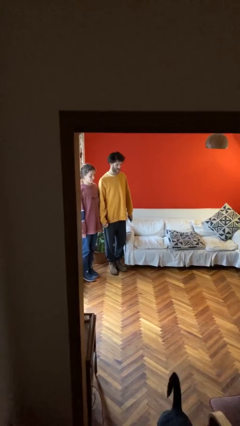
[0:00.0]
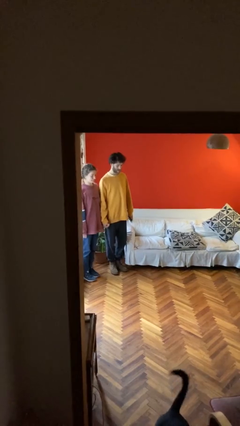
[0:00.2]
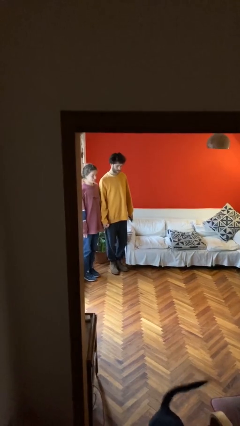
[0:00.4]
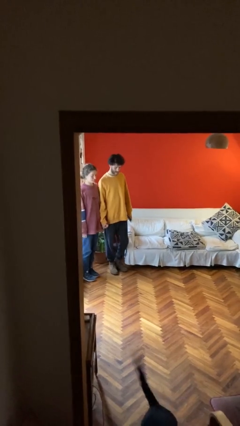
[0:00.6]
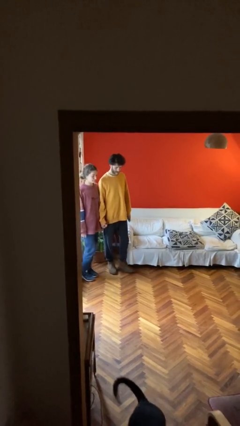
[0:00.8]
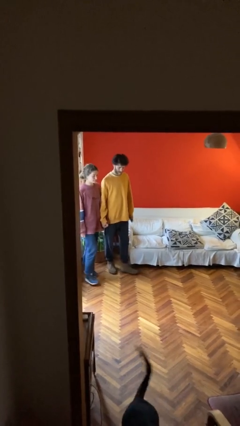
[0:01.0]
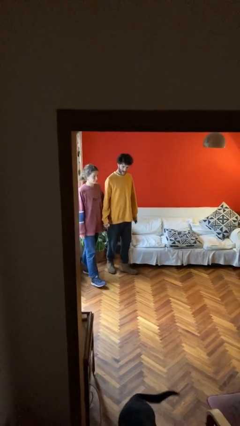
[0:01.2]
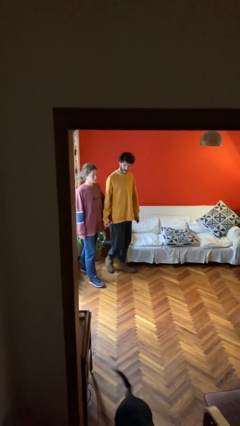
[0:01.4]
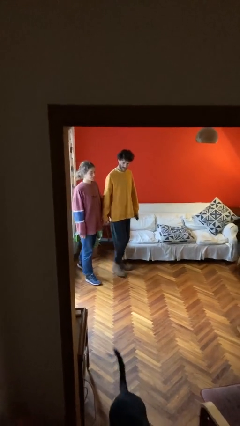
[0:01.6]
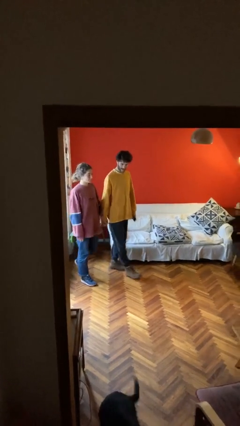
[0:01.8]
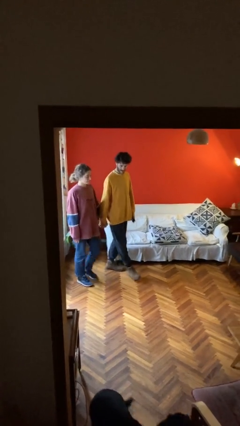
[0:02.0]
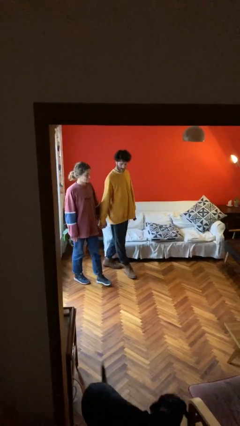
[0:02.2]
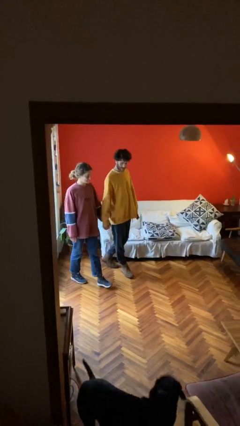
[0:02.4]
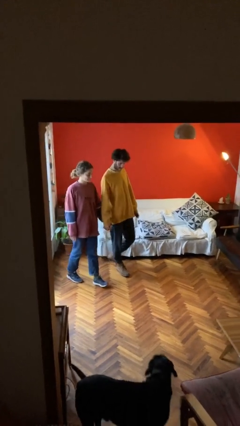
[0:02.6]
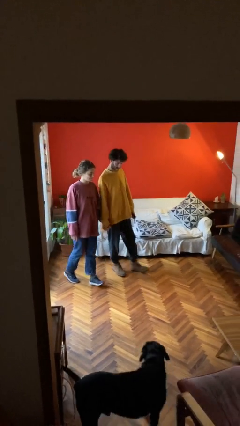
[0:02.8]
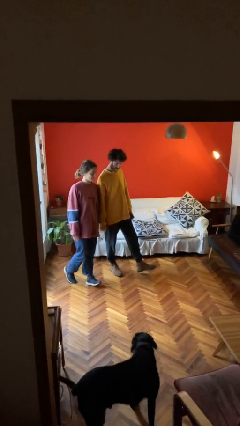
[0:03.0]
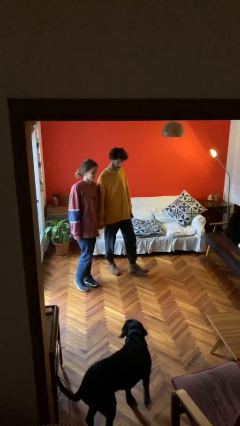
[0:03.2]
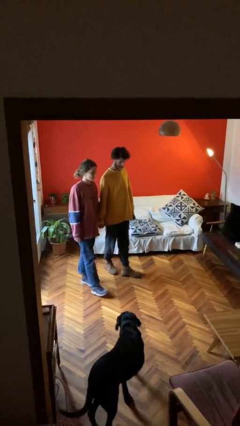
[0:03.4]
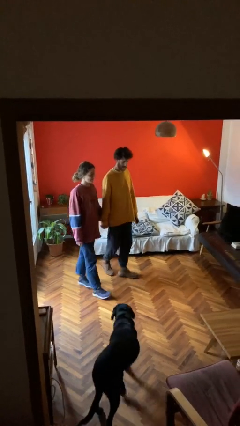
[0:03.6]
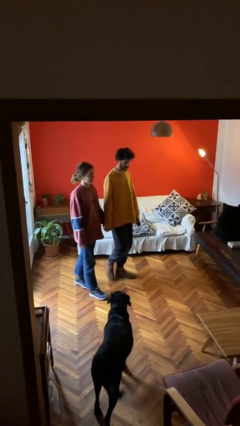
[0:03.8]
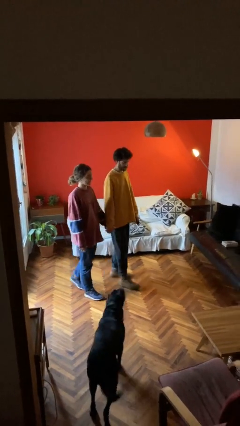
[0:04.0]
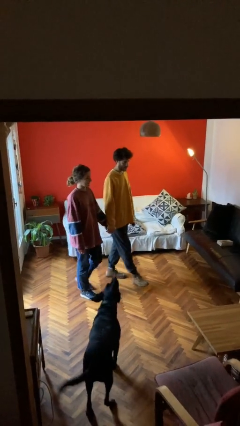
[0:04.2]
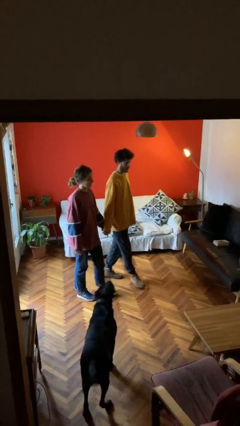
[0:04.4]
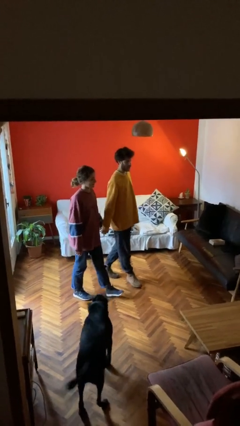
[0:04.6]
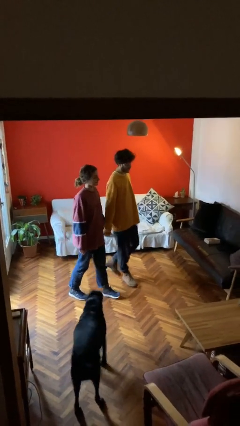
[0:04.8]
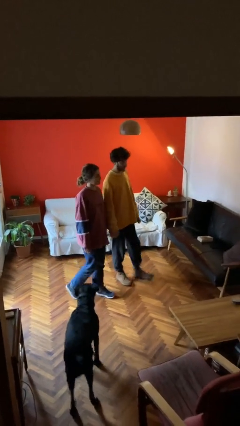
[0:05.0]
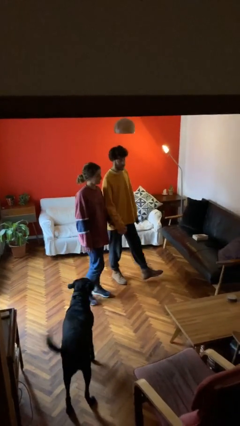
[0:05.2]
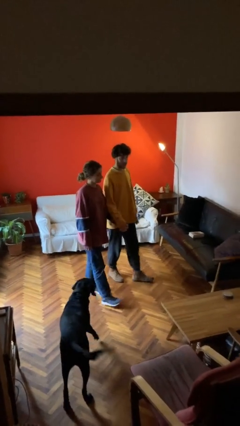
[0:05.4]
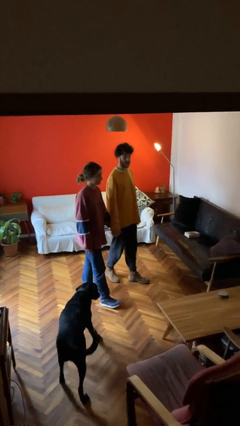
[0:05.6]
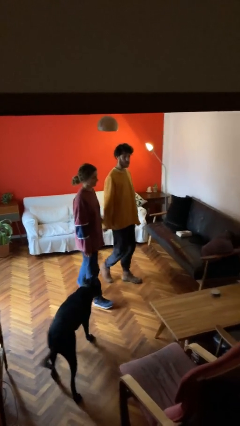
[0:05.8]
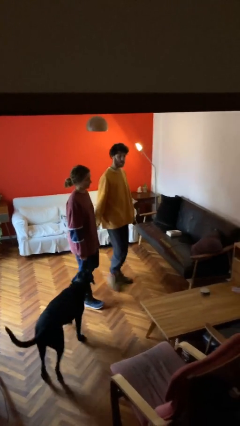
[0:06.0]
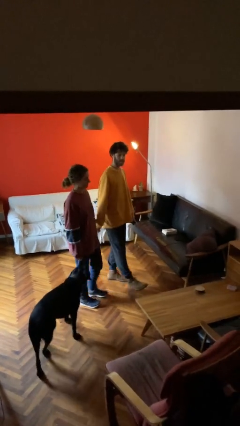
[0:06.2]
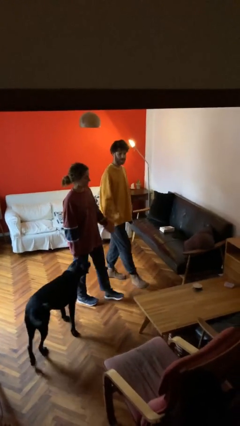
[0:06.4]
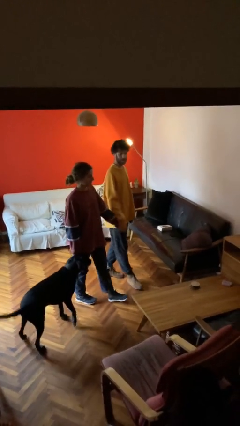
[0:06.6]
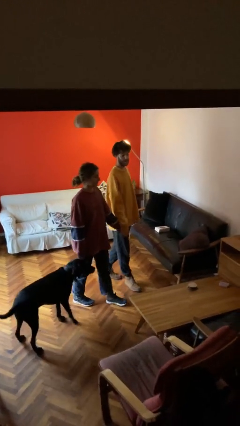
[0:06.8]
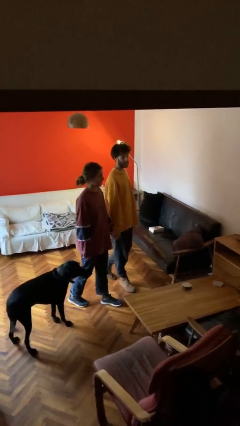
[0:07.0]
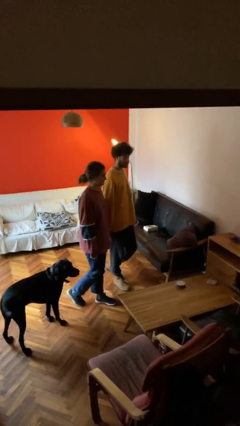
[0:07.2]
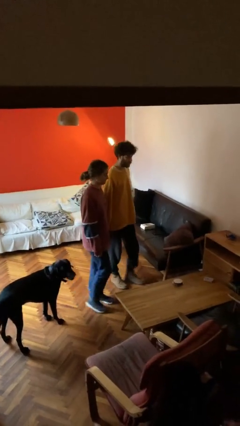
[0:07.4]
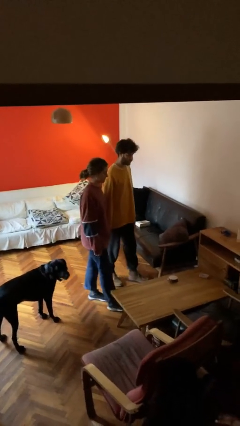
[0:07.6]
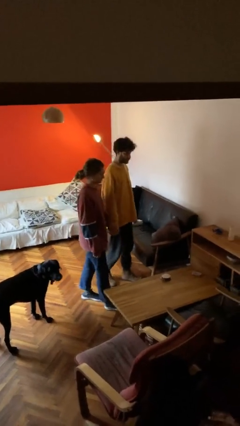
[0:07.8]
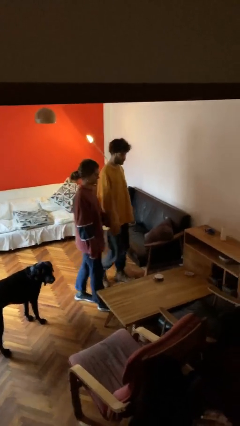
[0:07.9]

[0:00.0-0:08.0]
person holds hand

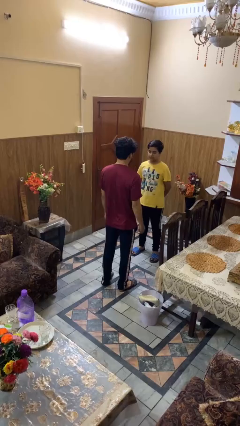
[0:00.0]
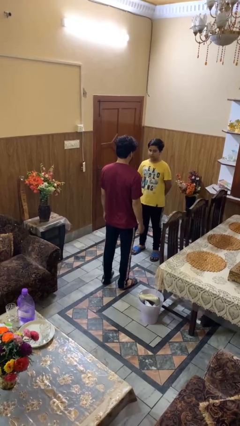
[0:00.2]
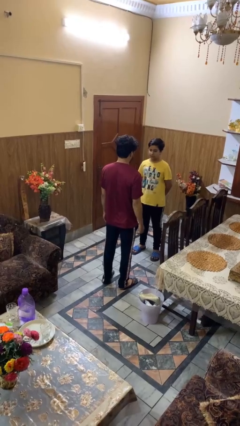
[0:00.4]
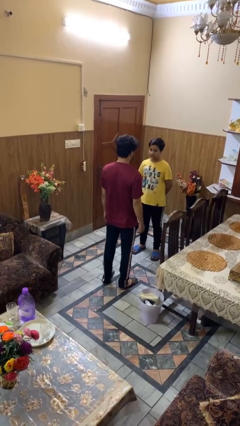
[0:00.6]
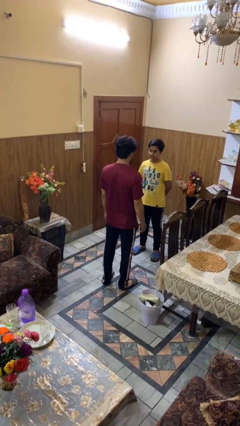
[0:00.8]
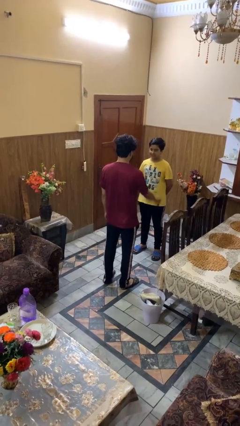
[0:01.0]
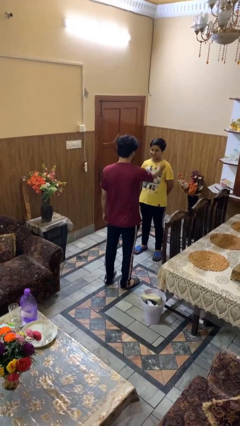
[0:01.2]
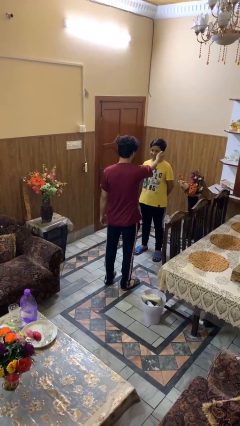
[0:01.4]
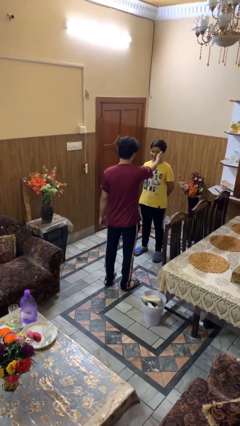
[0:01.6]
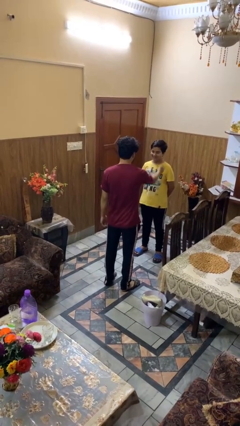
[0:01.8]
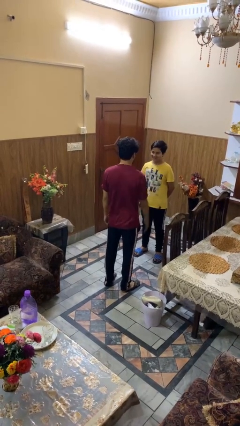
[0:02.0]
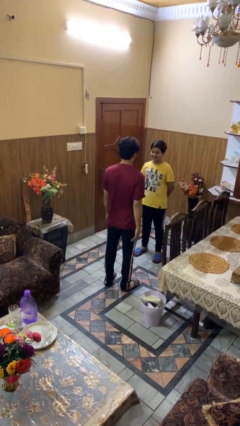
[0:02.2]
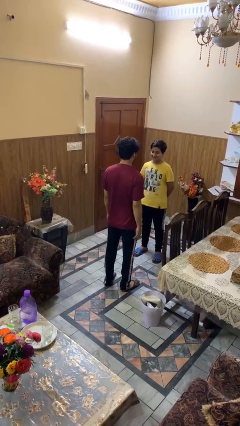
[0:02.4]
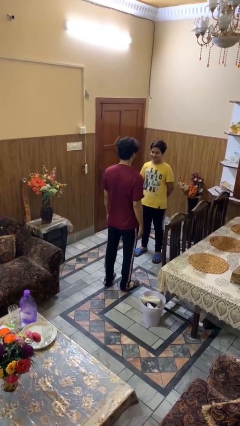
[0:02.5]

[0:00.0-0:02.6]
person touches face of person

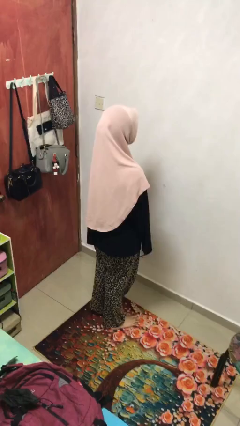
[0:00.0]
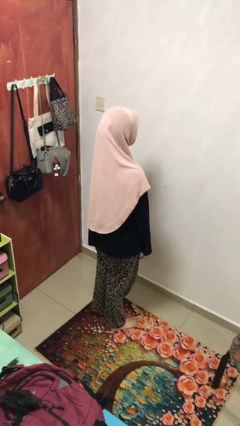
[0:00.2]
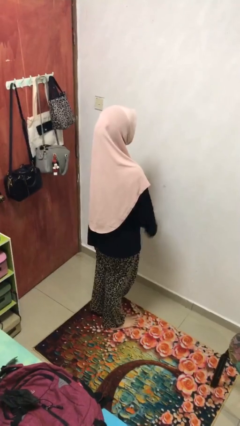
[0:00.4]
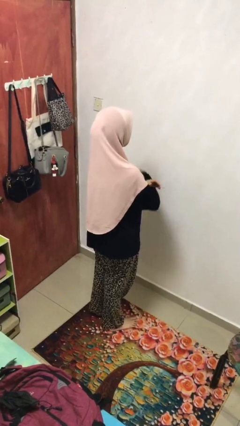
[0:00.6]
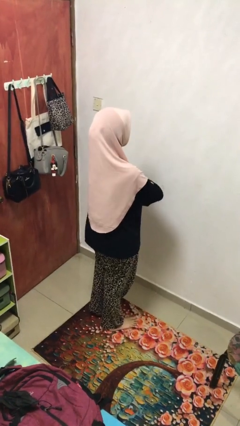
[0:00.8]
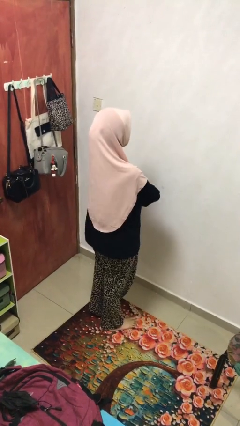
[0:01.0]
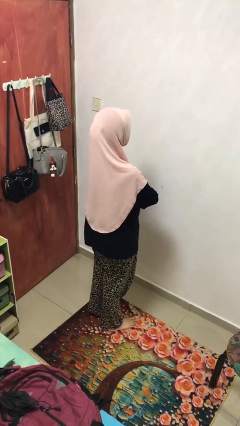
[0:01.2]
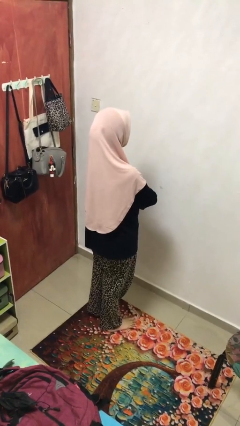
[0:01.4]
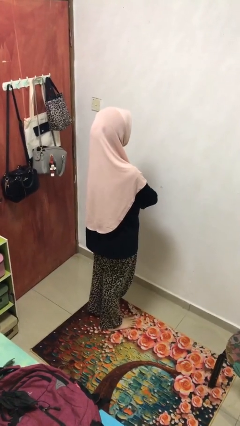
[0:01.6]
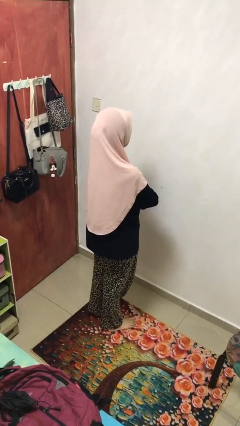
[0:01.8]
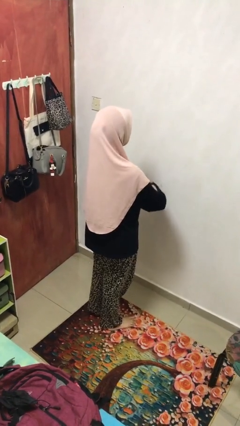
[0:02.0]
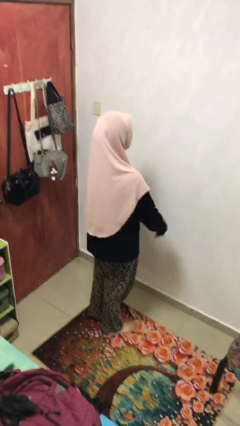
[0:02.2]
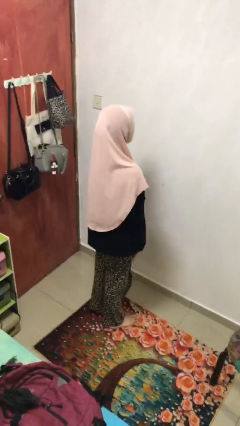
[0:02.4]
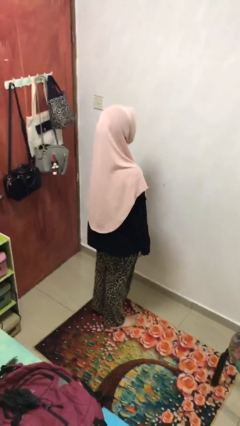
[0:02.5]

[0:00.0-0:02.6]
person crosses arms

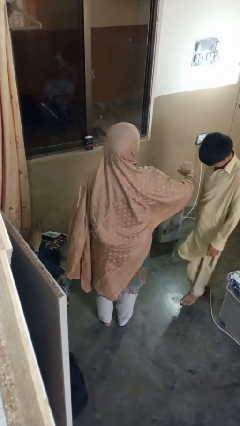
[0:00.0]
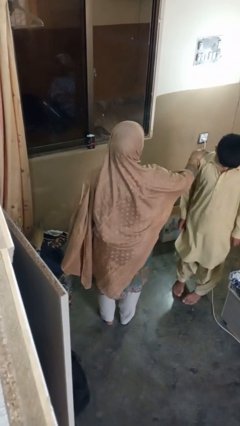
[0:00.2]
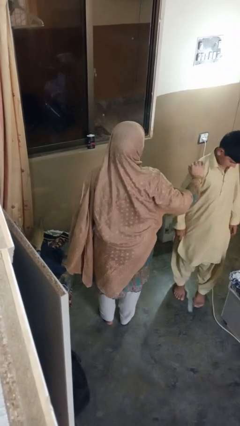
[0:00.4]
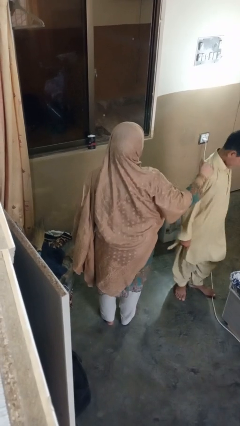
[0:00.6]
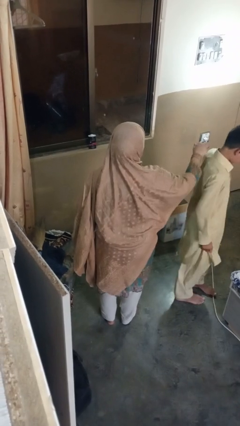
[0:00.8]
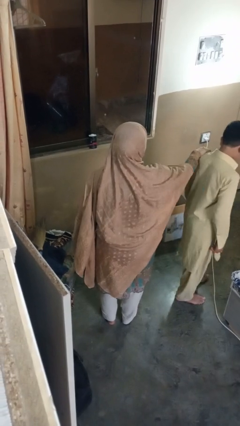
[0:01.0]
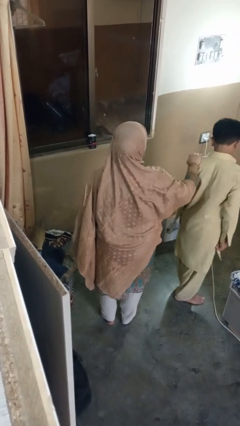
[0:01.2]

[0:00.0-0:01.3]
person spins person around

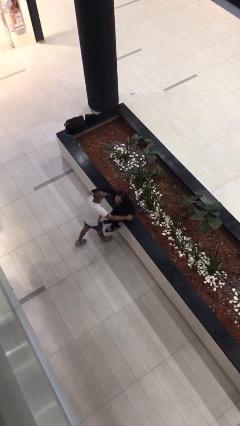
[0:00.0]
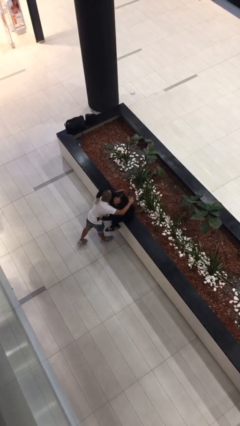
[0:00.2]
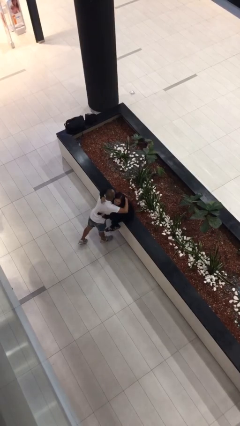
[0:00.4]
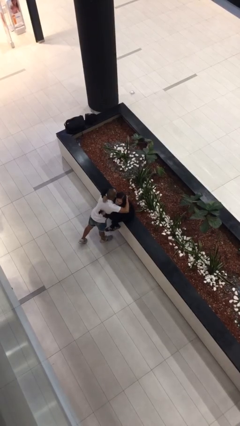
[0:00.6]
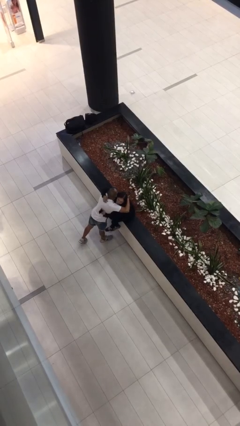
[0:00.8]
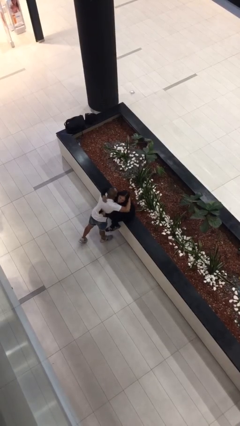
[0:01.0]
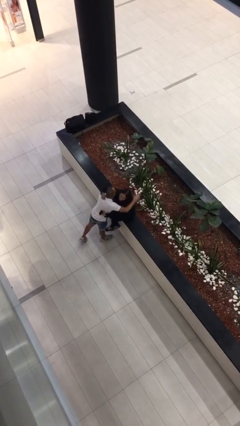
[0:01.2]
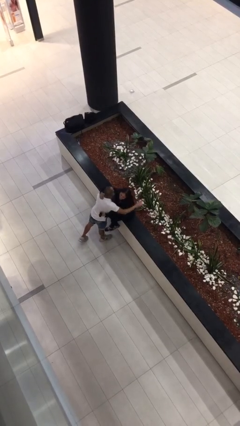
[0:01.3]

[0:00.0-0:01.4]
person embraces person

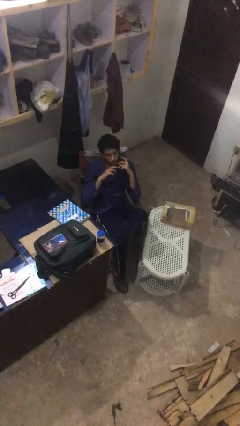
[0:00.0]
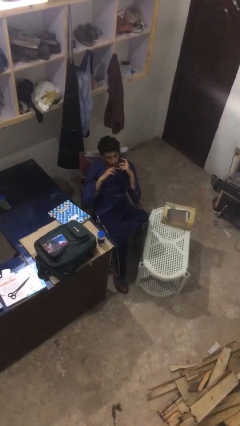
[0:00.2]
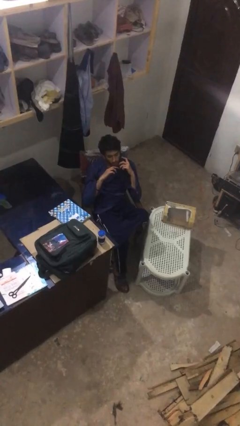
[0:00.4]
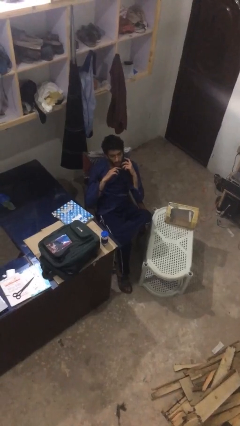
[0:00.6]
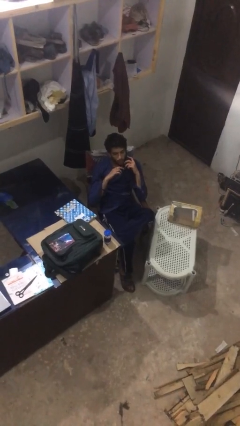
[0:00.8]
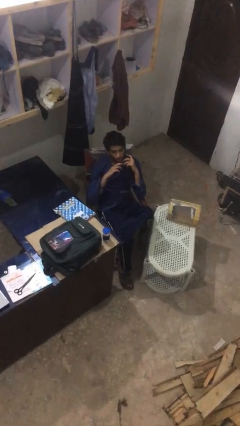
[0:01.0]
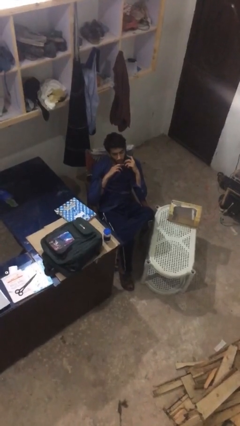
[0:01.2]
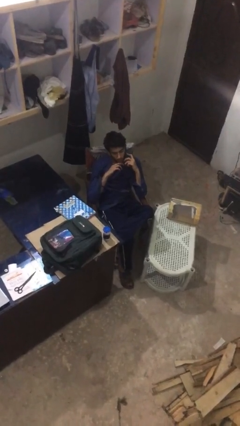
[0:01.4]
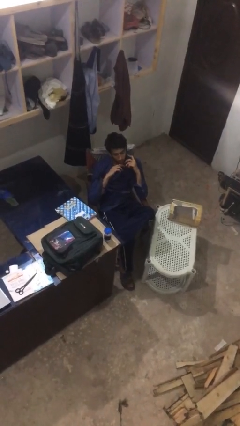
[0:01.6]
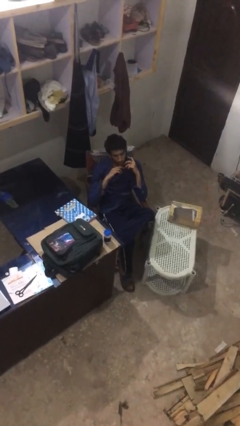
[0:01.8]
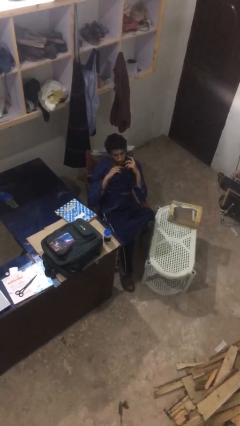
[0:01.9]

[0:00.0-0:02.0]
person talks on phone
